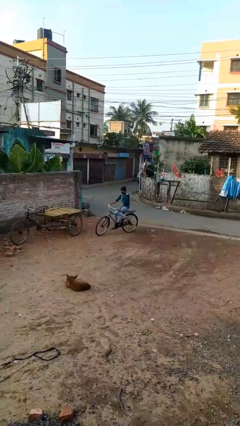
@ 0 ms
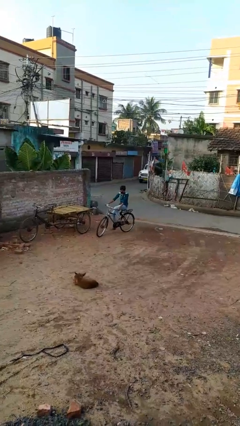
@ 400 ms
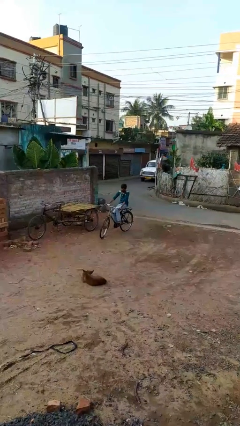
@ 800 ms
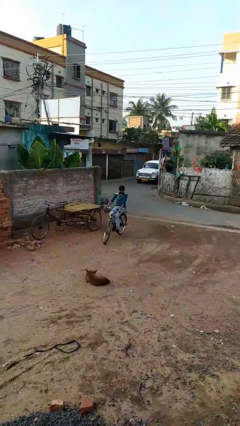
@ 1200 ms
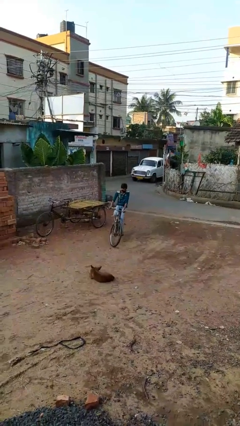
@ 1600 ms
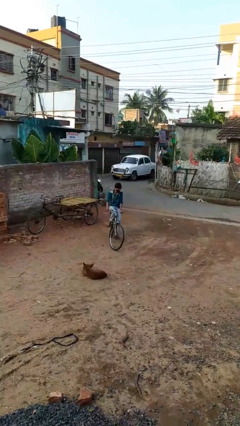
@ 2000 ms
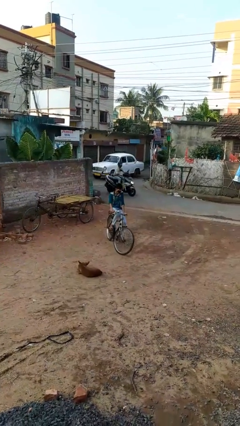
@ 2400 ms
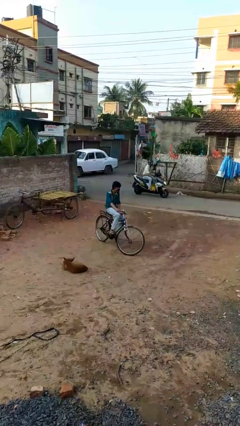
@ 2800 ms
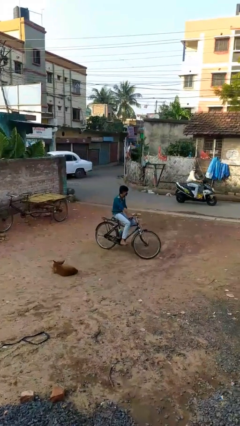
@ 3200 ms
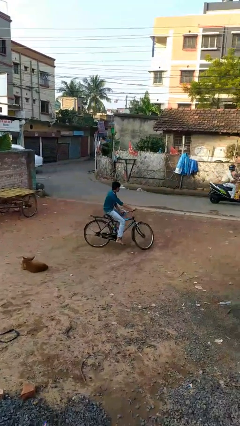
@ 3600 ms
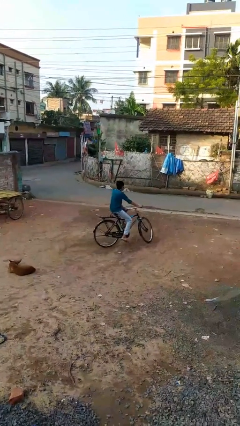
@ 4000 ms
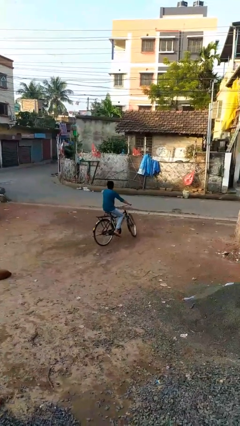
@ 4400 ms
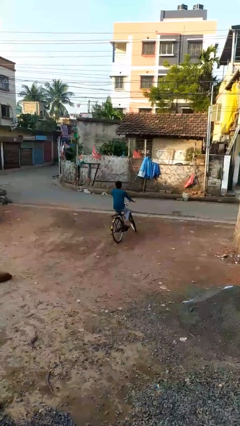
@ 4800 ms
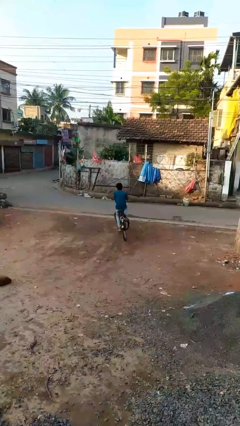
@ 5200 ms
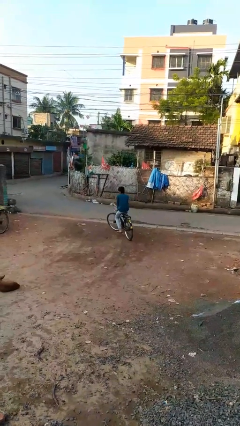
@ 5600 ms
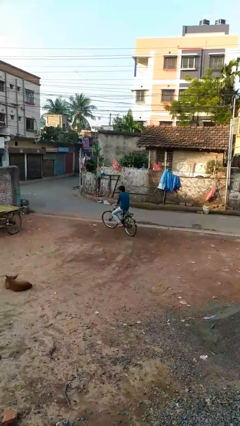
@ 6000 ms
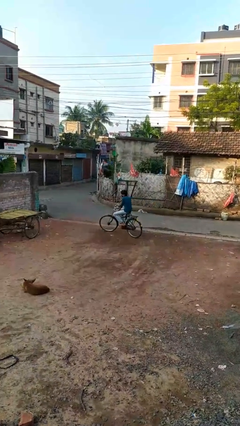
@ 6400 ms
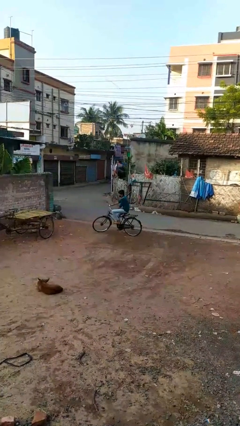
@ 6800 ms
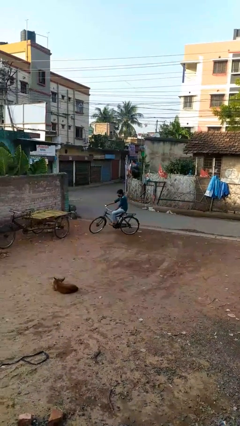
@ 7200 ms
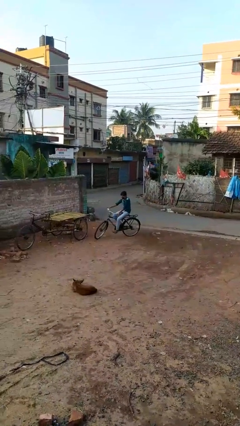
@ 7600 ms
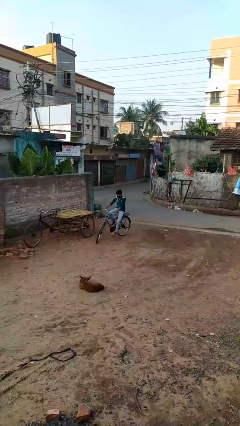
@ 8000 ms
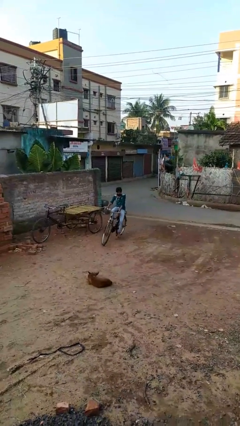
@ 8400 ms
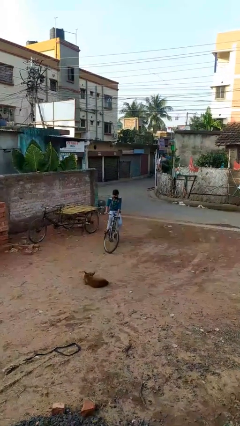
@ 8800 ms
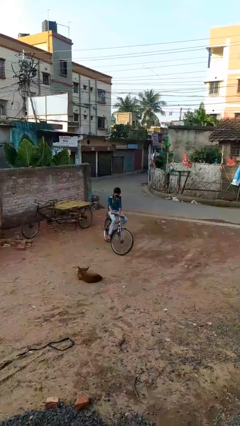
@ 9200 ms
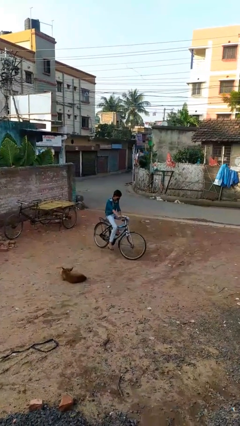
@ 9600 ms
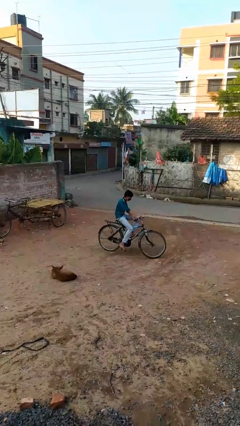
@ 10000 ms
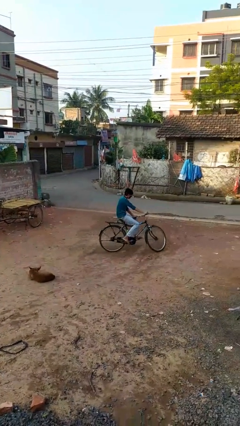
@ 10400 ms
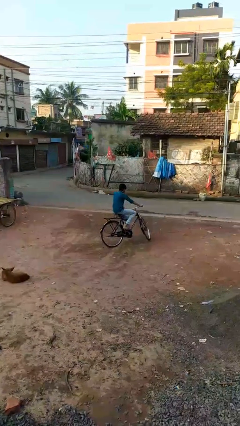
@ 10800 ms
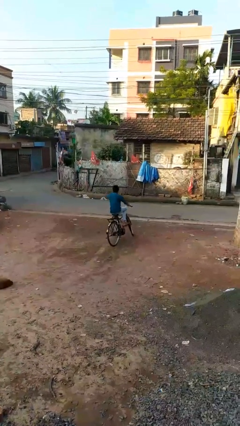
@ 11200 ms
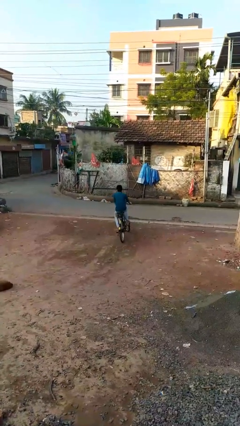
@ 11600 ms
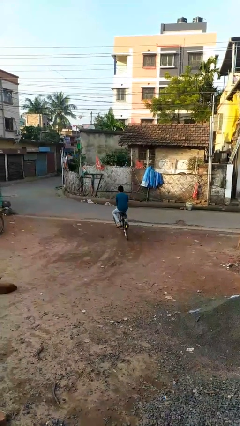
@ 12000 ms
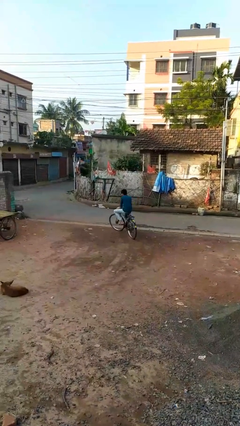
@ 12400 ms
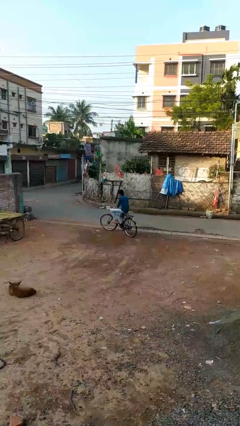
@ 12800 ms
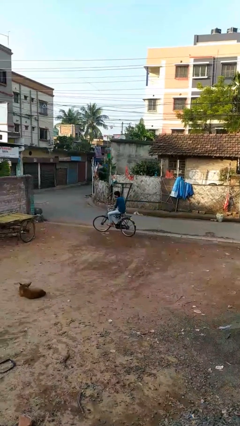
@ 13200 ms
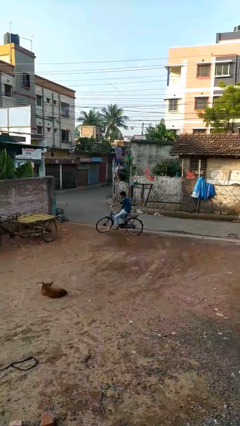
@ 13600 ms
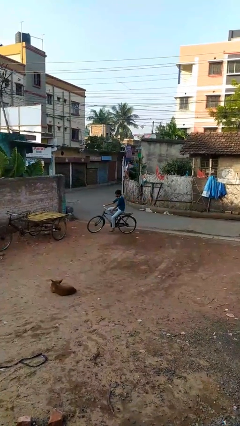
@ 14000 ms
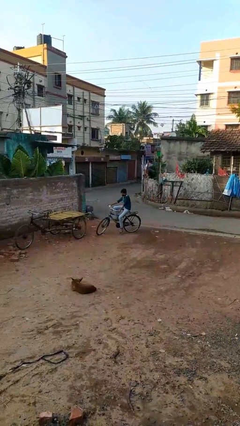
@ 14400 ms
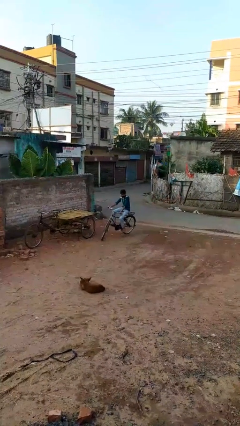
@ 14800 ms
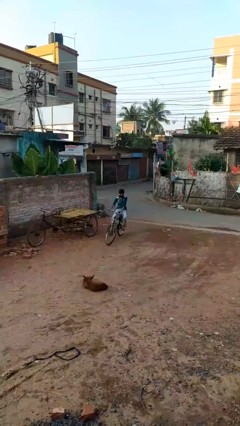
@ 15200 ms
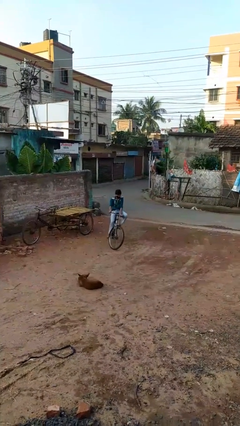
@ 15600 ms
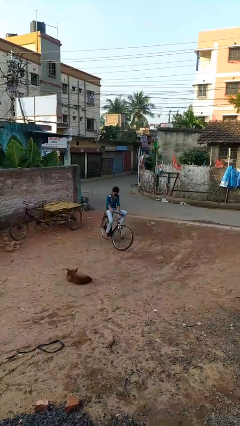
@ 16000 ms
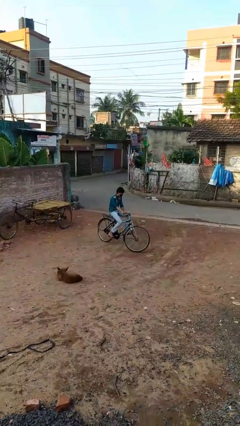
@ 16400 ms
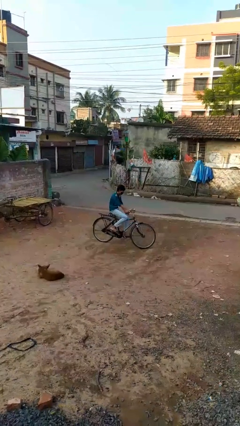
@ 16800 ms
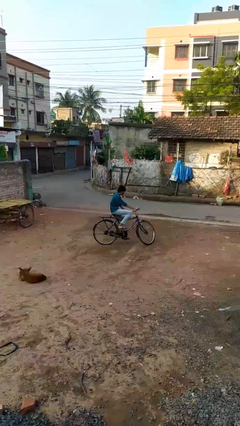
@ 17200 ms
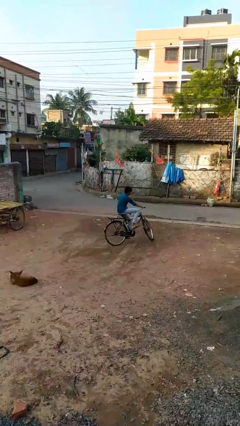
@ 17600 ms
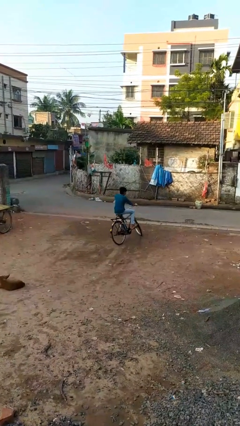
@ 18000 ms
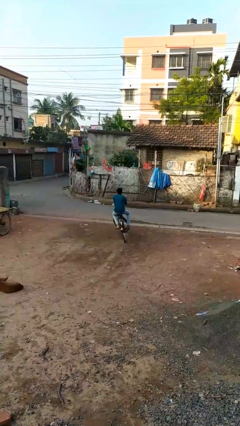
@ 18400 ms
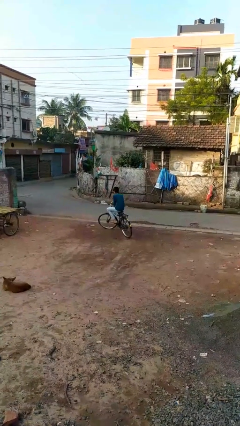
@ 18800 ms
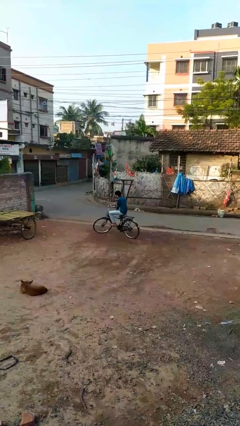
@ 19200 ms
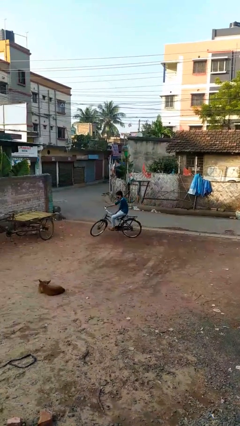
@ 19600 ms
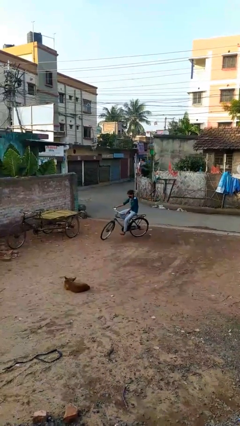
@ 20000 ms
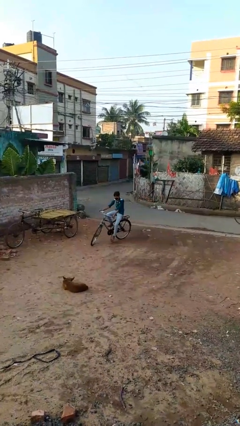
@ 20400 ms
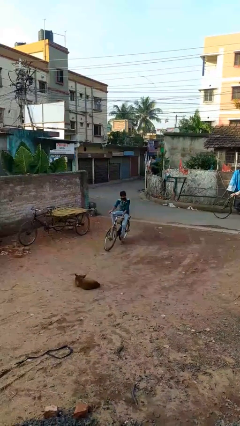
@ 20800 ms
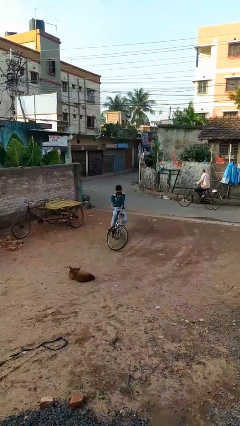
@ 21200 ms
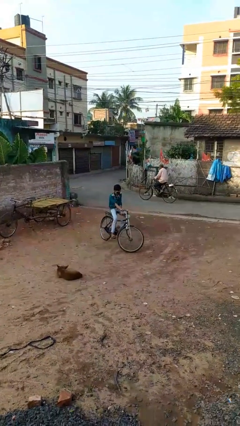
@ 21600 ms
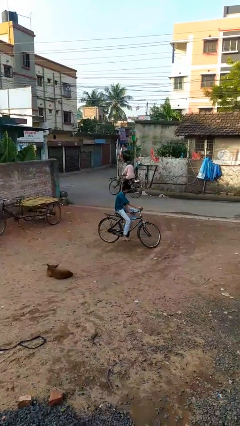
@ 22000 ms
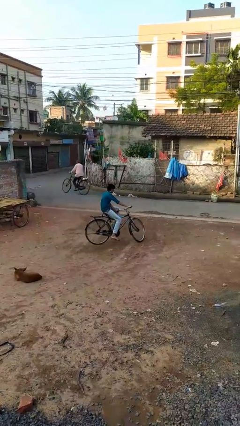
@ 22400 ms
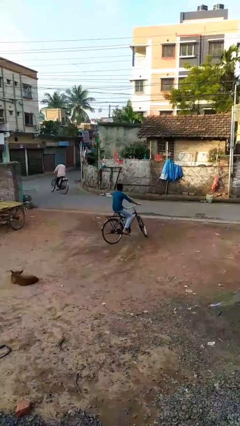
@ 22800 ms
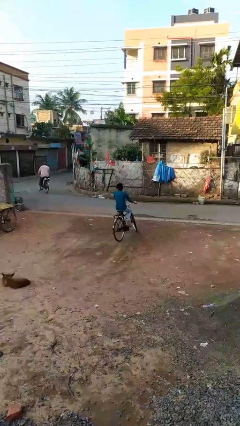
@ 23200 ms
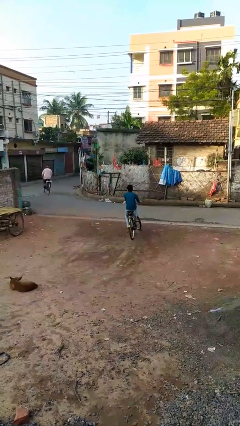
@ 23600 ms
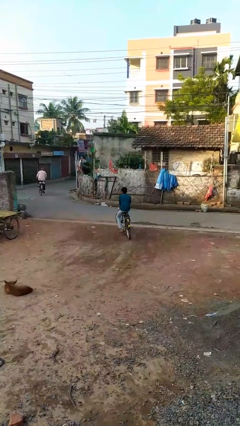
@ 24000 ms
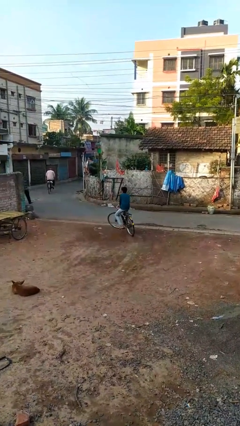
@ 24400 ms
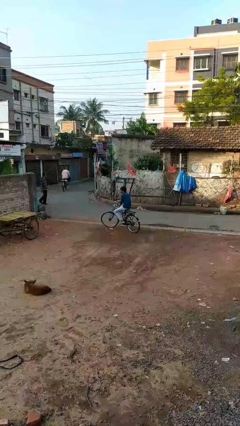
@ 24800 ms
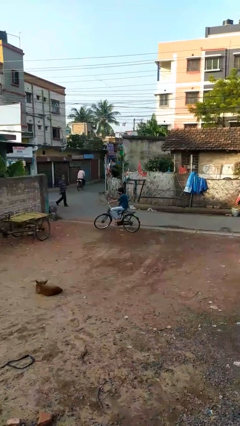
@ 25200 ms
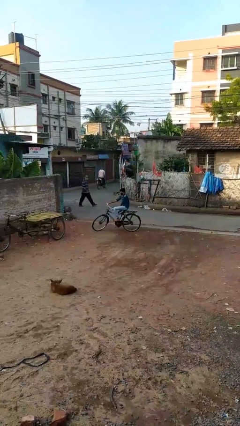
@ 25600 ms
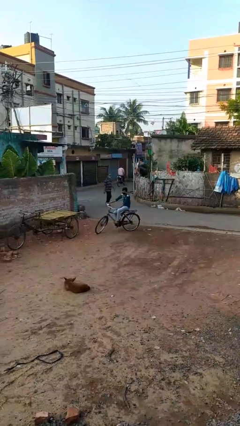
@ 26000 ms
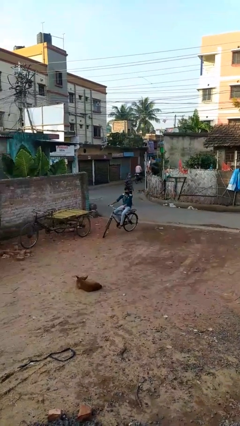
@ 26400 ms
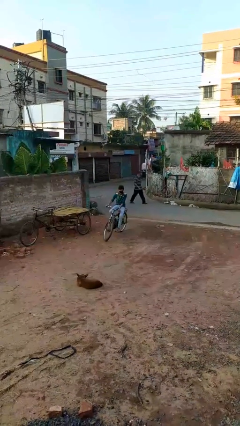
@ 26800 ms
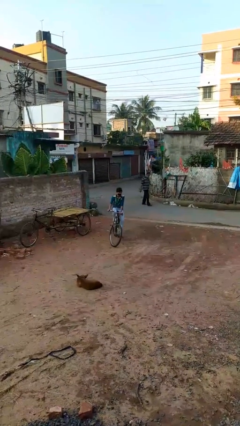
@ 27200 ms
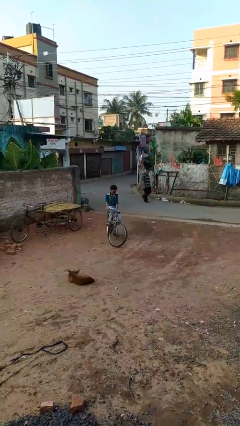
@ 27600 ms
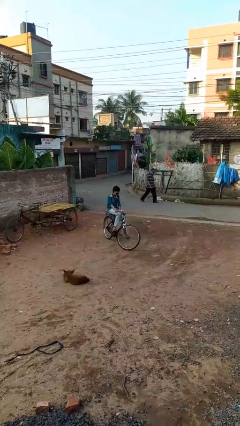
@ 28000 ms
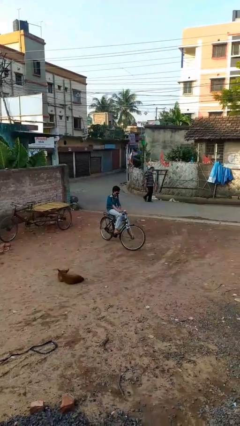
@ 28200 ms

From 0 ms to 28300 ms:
person rides bicycle

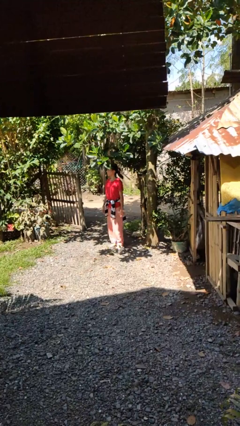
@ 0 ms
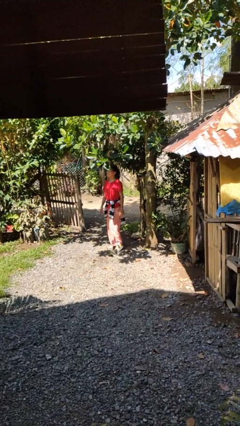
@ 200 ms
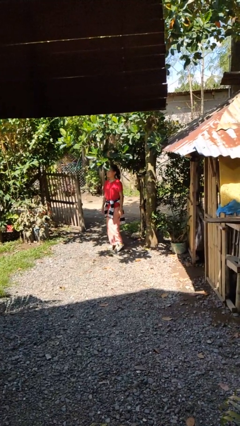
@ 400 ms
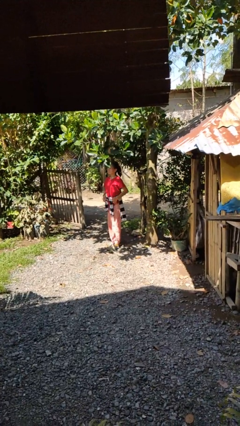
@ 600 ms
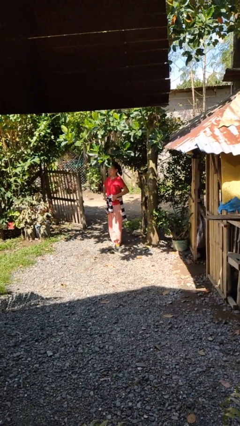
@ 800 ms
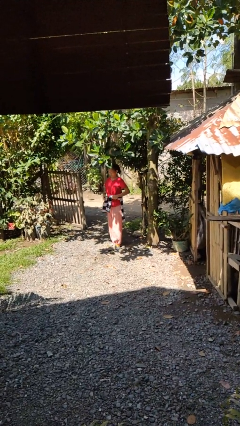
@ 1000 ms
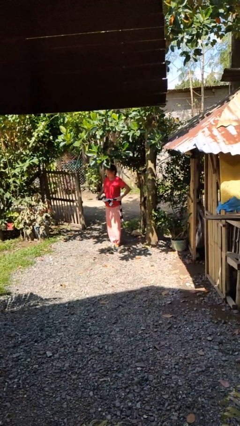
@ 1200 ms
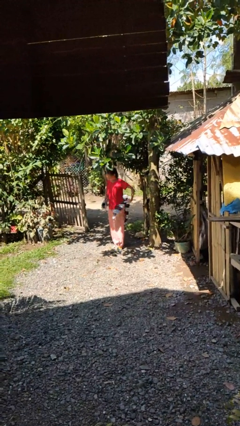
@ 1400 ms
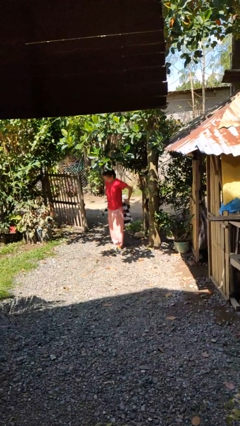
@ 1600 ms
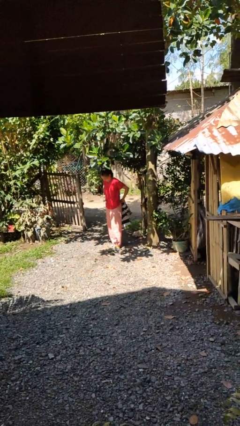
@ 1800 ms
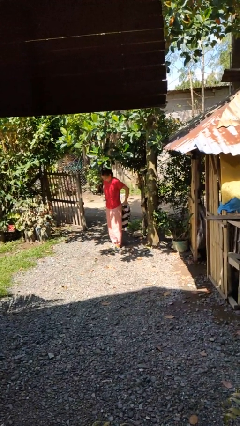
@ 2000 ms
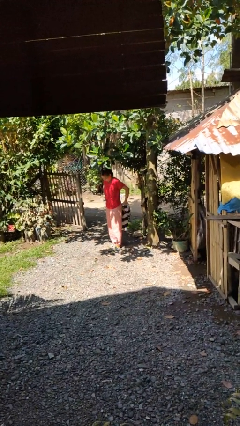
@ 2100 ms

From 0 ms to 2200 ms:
person unties jacket around waist

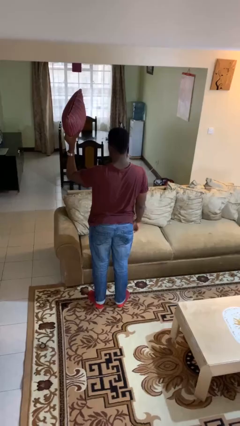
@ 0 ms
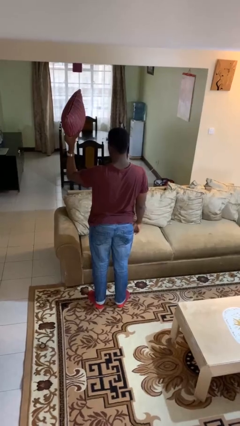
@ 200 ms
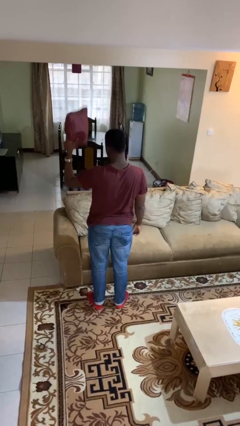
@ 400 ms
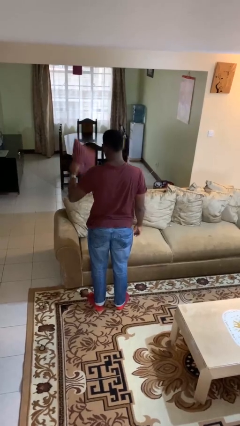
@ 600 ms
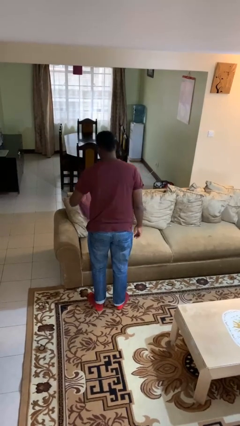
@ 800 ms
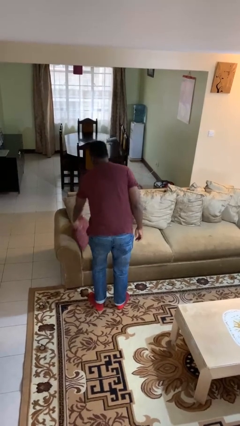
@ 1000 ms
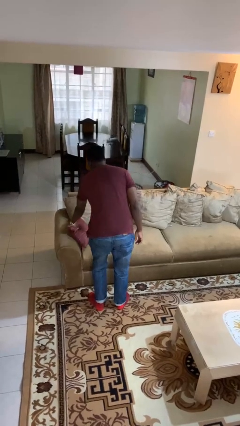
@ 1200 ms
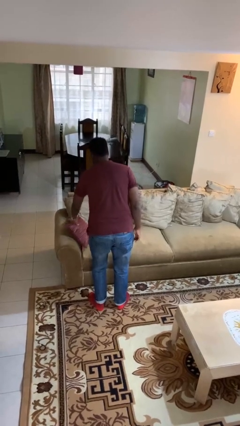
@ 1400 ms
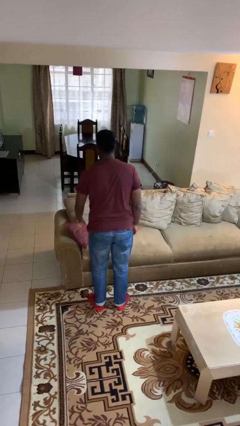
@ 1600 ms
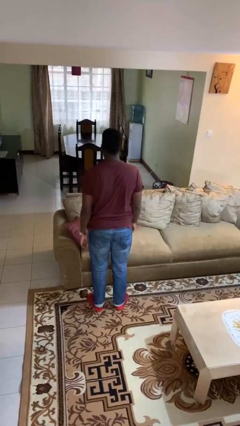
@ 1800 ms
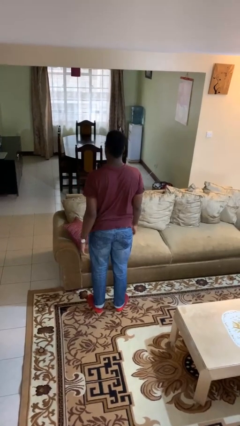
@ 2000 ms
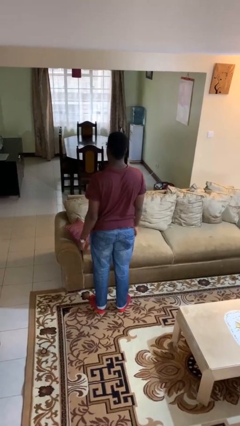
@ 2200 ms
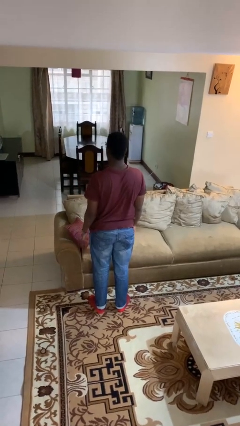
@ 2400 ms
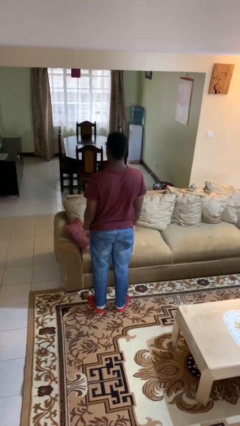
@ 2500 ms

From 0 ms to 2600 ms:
person puts down object on couch
